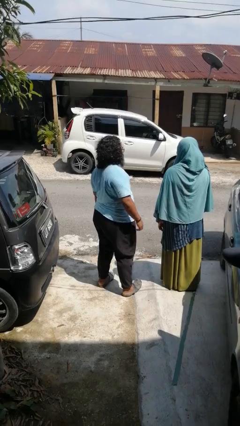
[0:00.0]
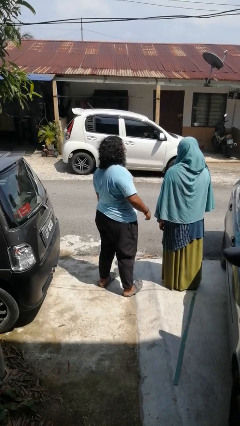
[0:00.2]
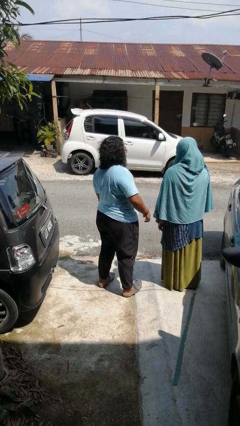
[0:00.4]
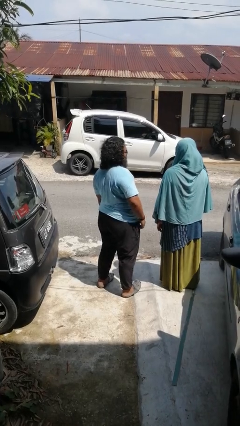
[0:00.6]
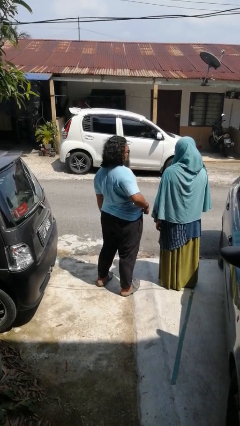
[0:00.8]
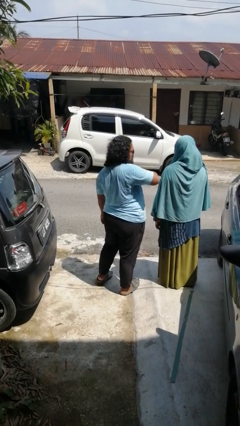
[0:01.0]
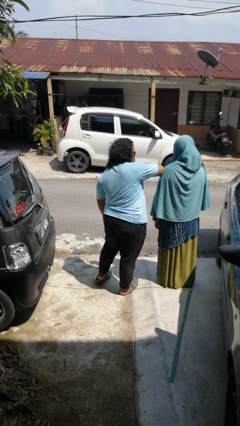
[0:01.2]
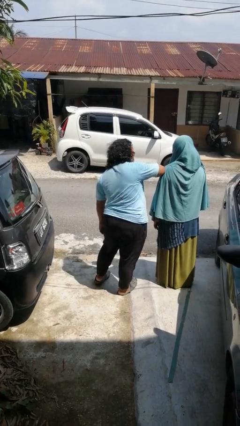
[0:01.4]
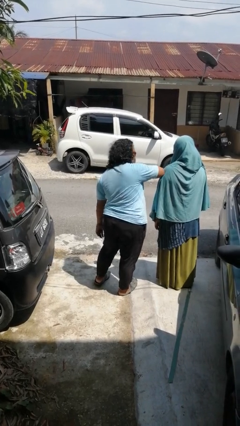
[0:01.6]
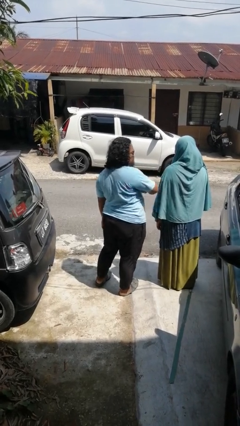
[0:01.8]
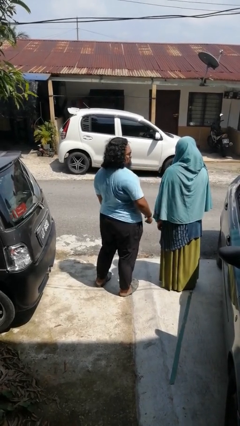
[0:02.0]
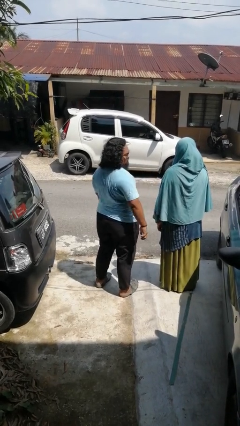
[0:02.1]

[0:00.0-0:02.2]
person nudges person with elbow

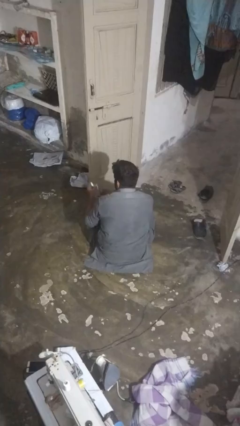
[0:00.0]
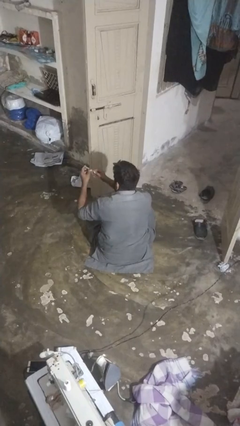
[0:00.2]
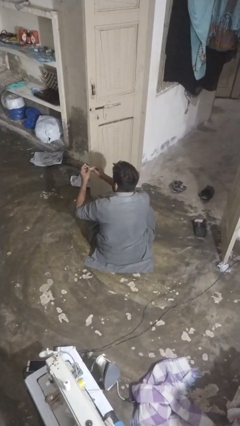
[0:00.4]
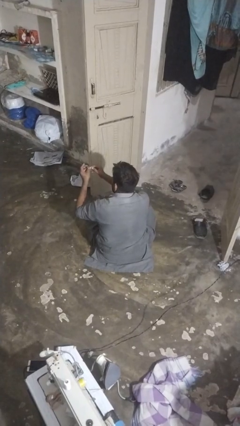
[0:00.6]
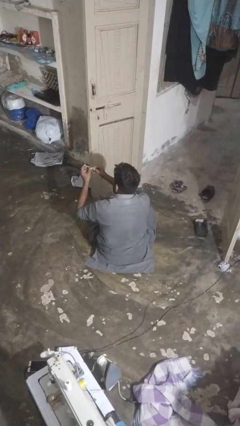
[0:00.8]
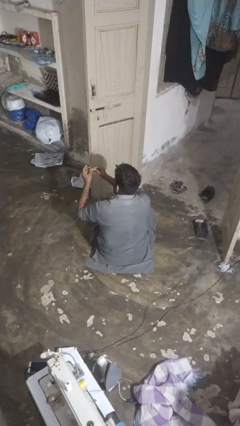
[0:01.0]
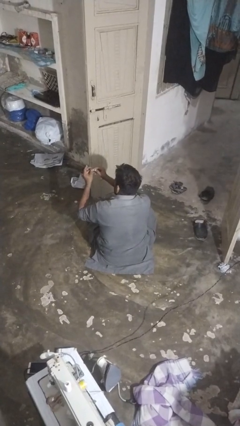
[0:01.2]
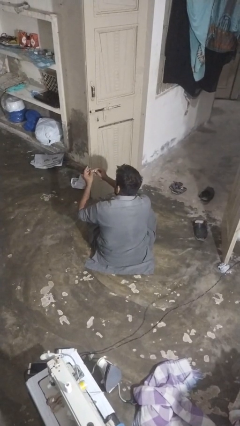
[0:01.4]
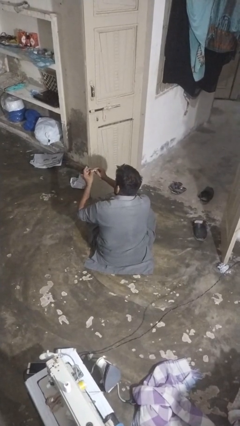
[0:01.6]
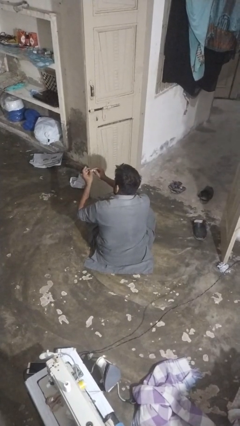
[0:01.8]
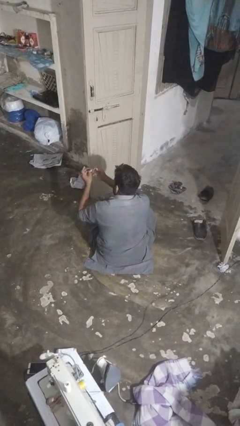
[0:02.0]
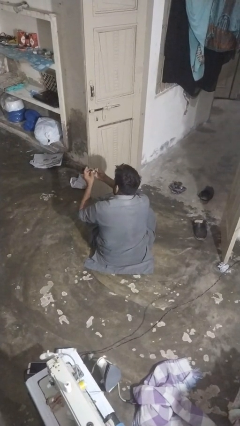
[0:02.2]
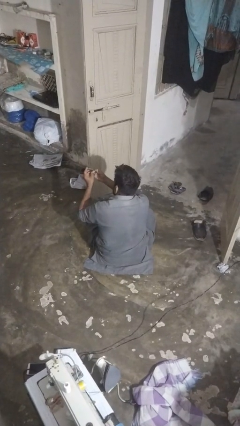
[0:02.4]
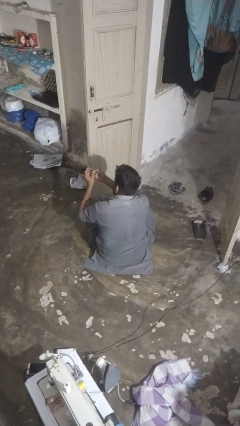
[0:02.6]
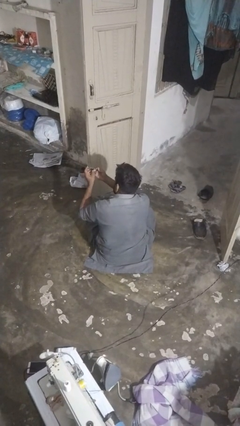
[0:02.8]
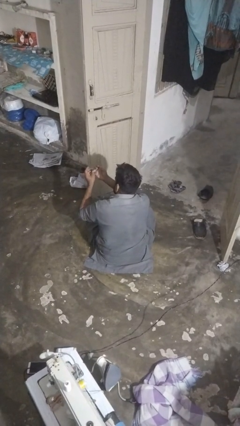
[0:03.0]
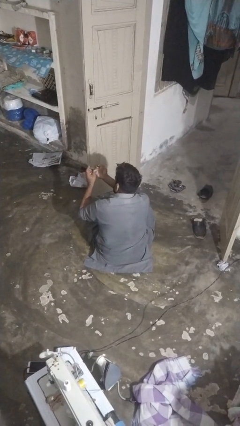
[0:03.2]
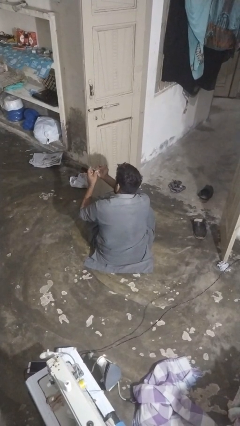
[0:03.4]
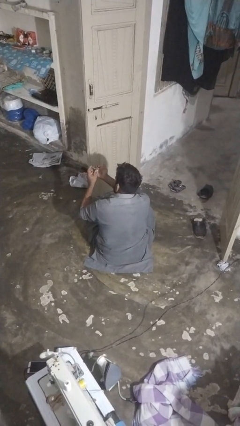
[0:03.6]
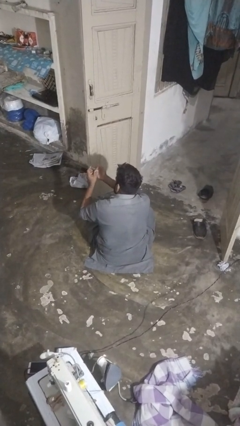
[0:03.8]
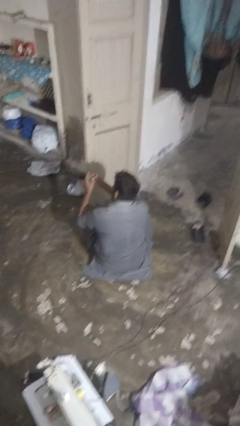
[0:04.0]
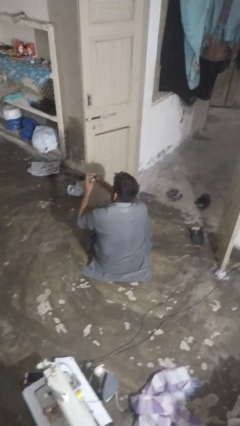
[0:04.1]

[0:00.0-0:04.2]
person clips fingernails

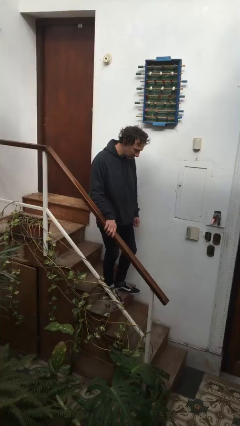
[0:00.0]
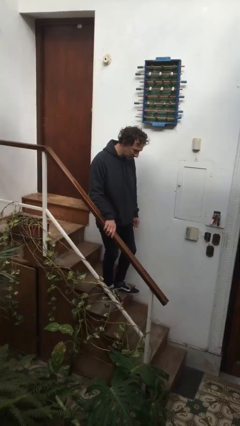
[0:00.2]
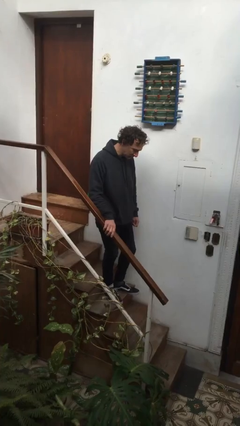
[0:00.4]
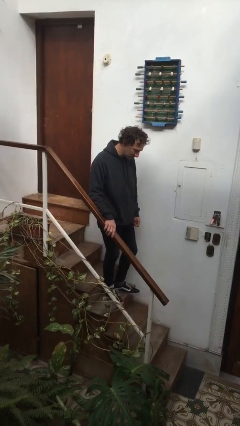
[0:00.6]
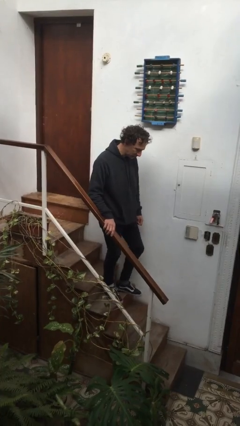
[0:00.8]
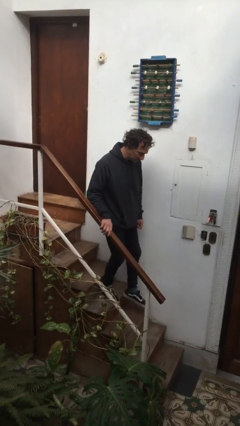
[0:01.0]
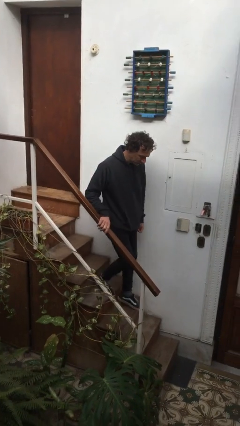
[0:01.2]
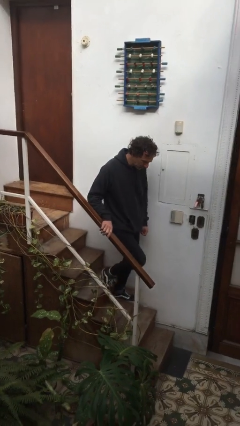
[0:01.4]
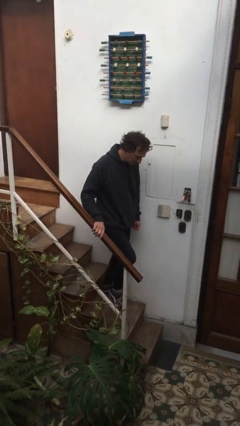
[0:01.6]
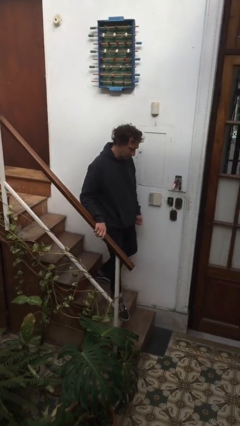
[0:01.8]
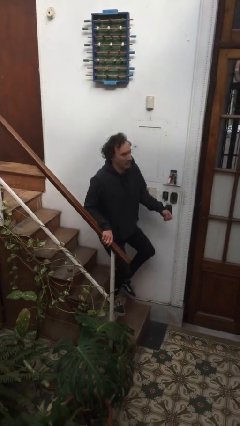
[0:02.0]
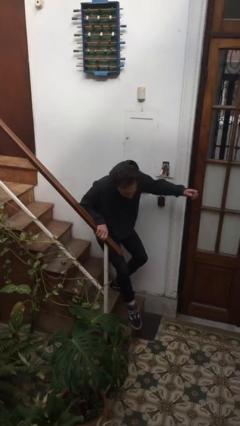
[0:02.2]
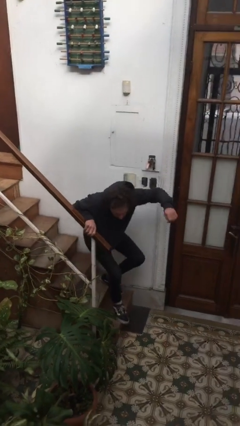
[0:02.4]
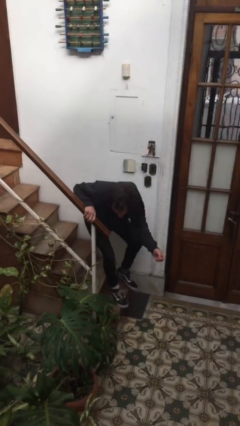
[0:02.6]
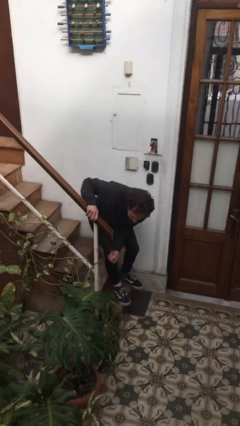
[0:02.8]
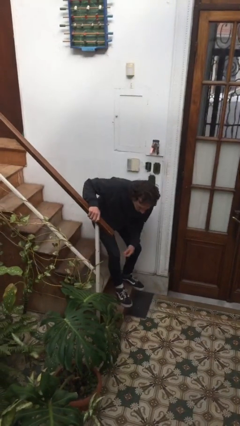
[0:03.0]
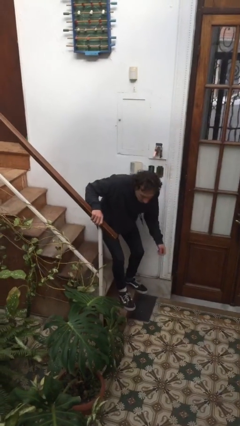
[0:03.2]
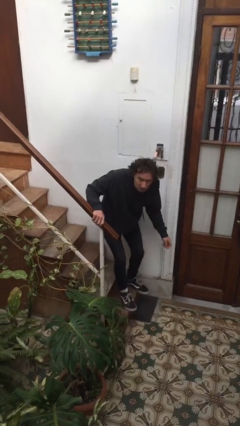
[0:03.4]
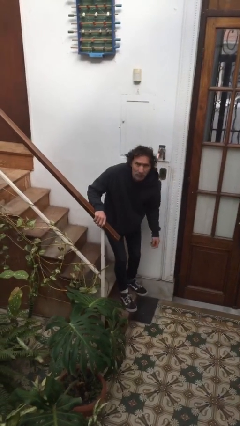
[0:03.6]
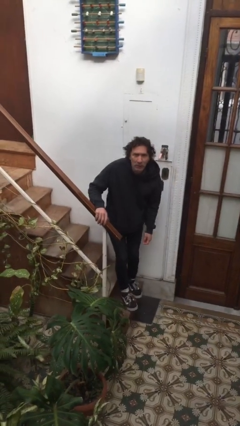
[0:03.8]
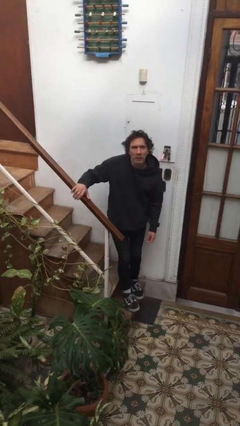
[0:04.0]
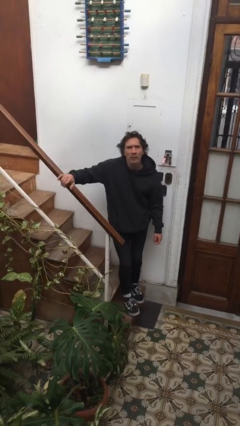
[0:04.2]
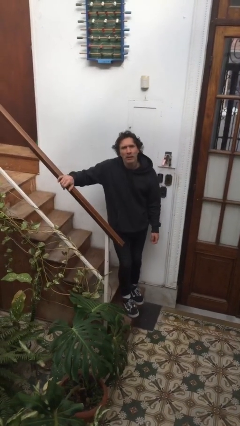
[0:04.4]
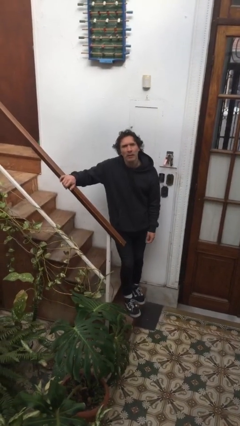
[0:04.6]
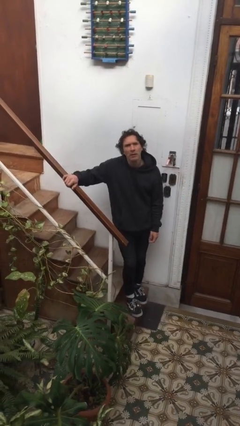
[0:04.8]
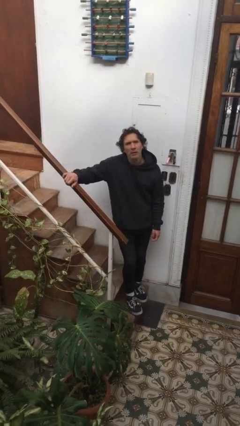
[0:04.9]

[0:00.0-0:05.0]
person climbs down stairs

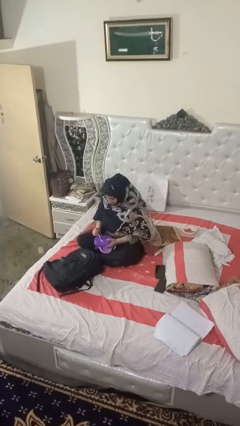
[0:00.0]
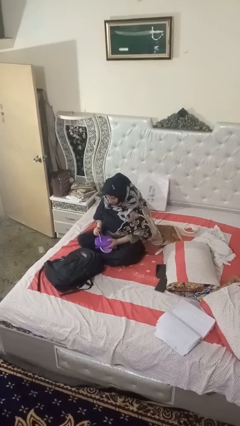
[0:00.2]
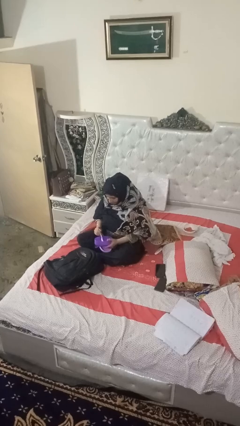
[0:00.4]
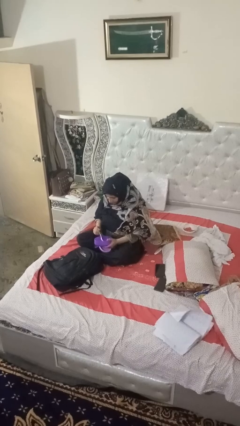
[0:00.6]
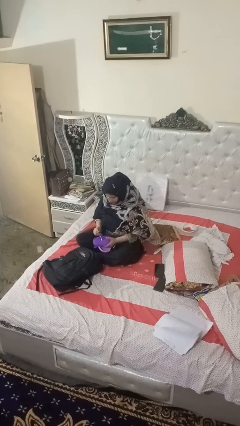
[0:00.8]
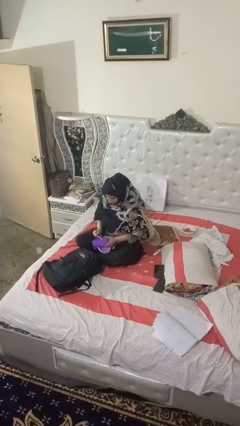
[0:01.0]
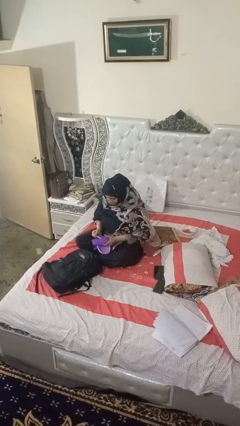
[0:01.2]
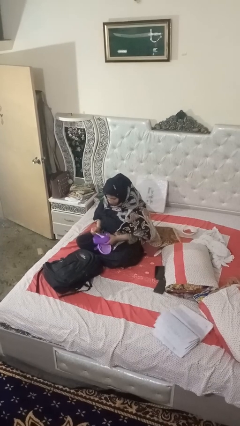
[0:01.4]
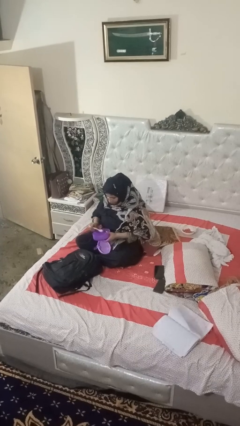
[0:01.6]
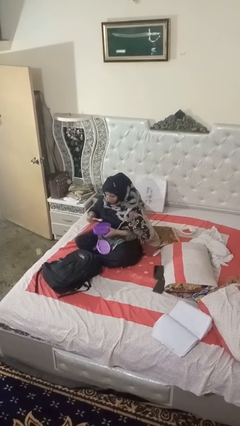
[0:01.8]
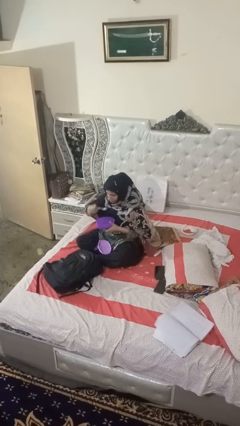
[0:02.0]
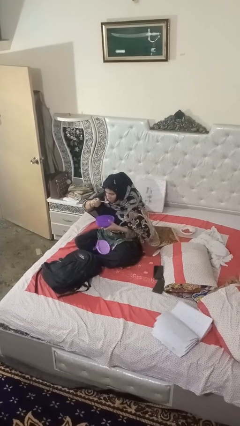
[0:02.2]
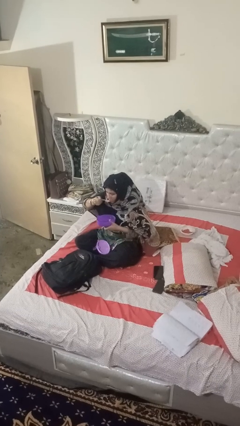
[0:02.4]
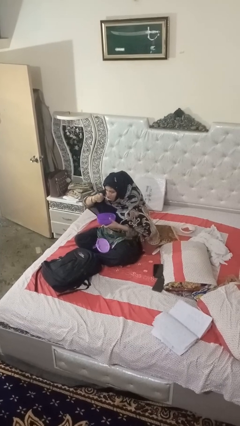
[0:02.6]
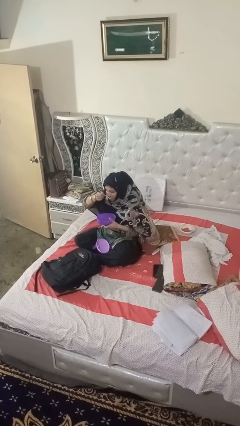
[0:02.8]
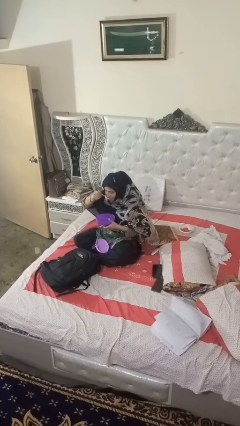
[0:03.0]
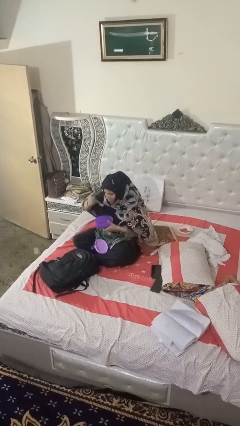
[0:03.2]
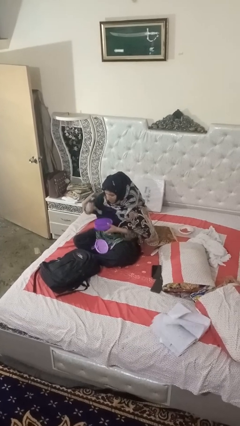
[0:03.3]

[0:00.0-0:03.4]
person eats snack from bag

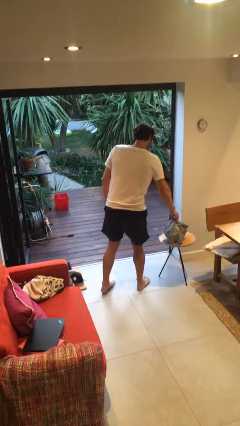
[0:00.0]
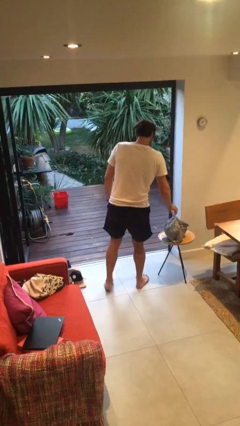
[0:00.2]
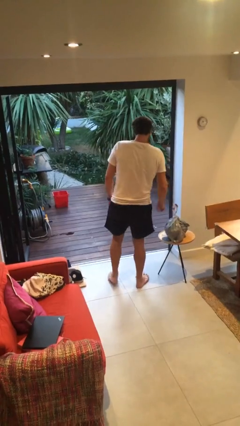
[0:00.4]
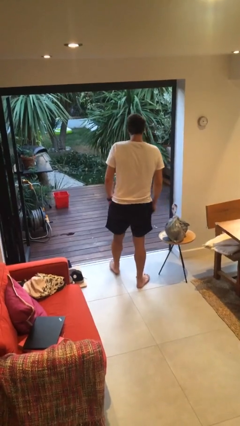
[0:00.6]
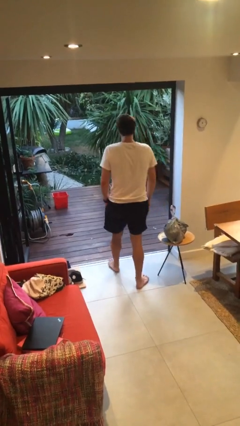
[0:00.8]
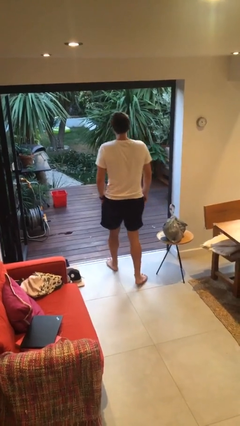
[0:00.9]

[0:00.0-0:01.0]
person puts down object on table

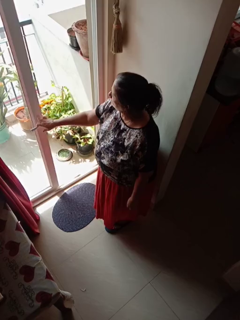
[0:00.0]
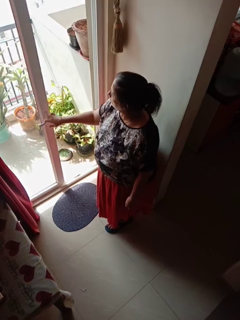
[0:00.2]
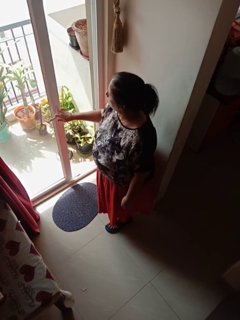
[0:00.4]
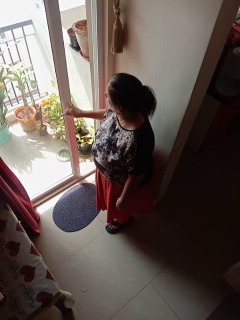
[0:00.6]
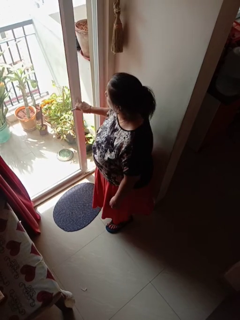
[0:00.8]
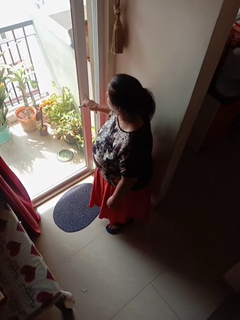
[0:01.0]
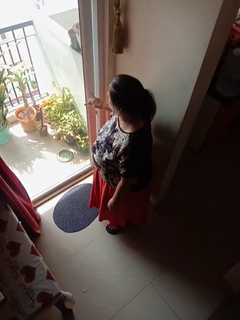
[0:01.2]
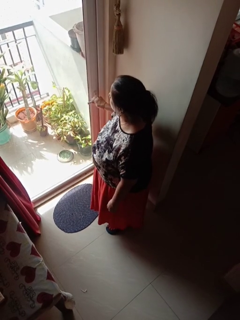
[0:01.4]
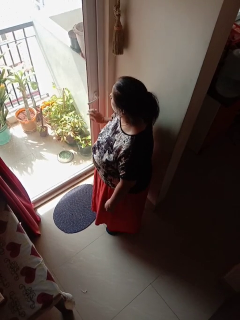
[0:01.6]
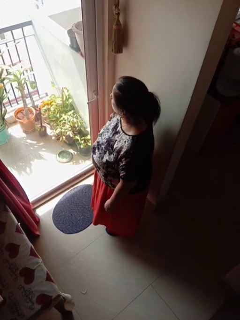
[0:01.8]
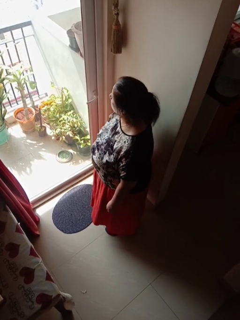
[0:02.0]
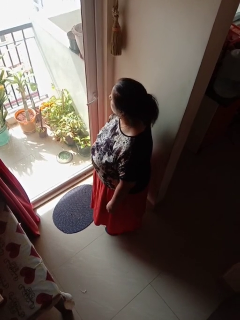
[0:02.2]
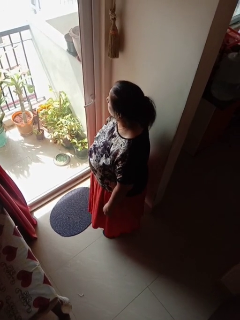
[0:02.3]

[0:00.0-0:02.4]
person closes sliding door
